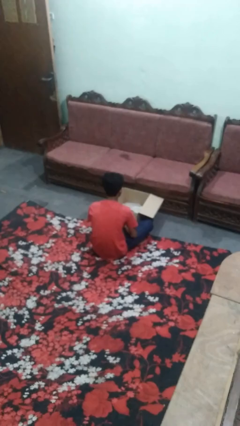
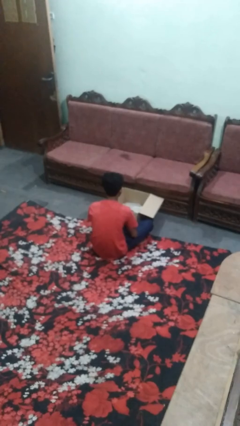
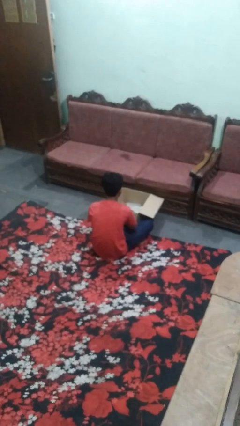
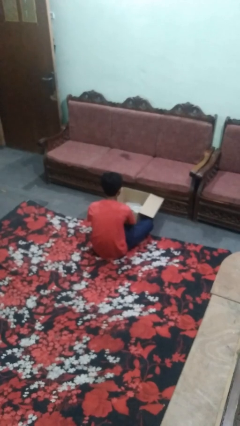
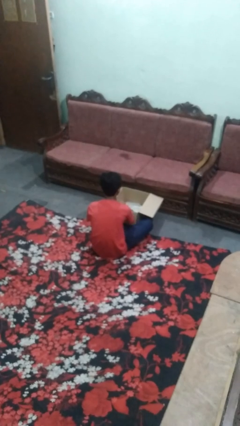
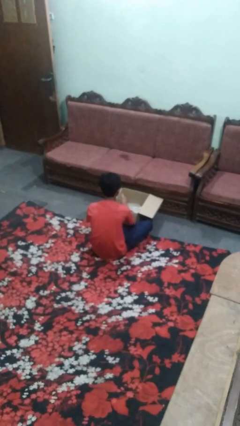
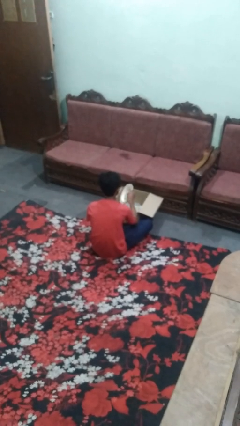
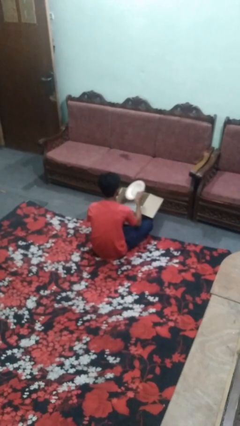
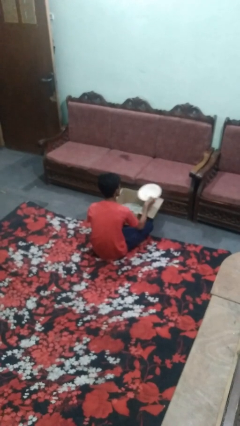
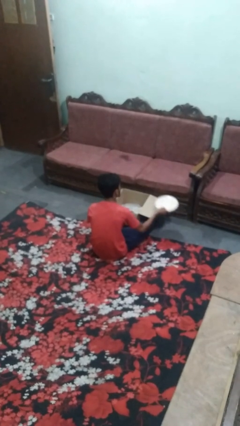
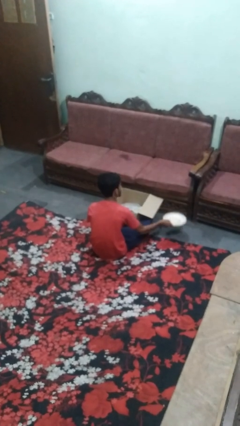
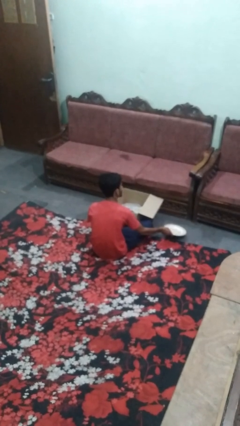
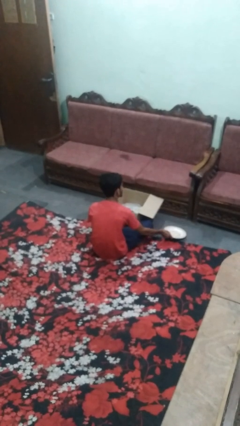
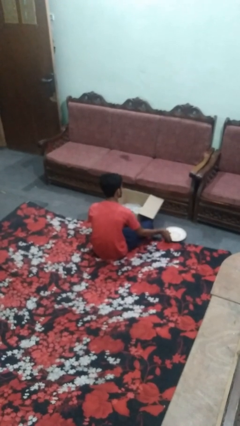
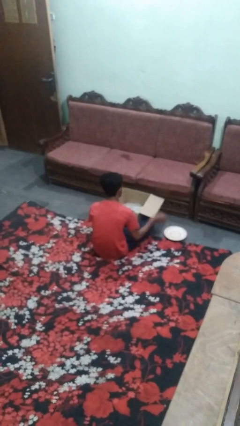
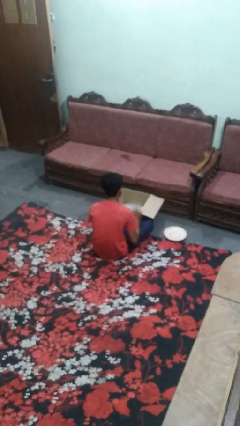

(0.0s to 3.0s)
person takes object from box

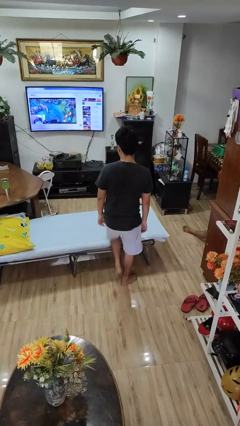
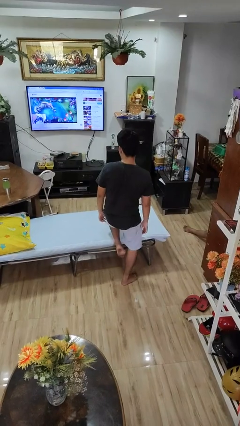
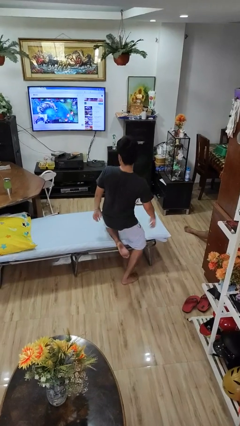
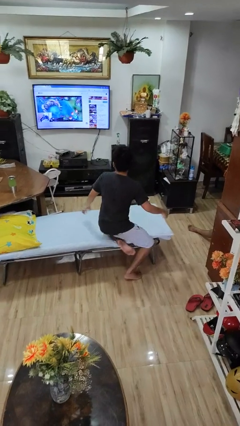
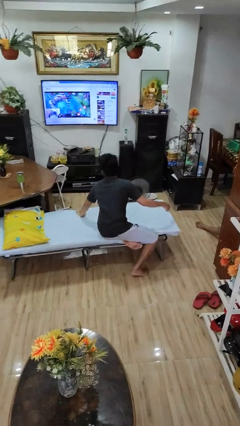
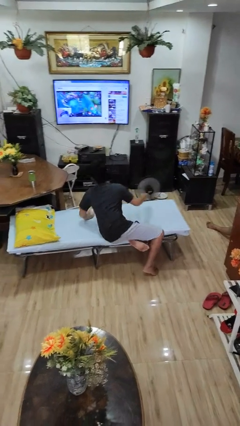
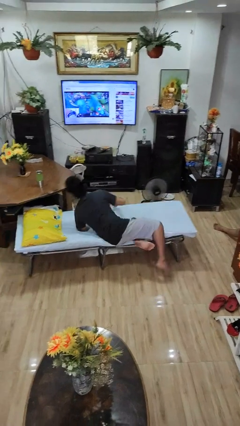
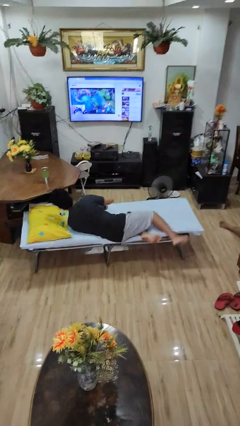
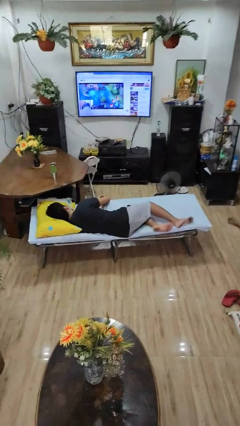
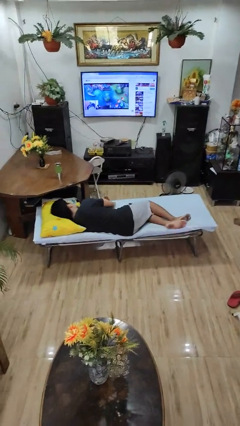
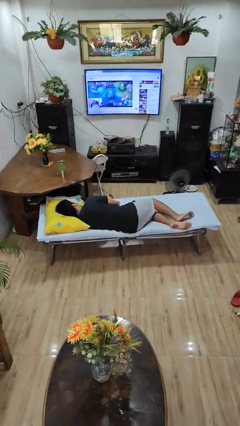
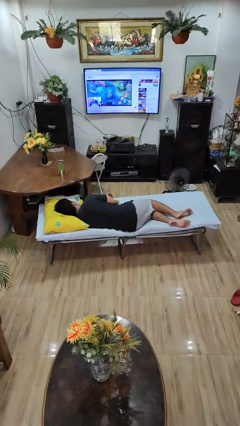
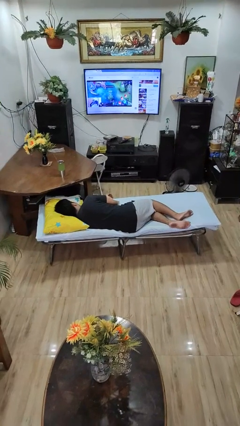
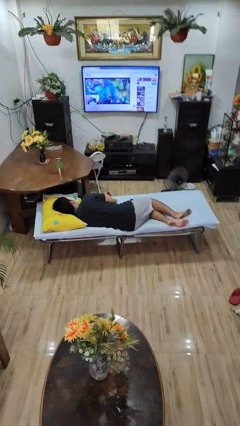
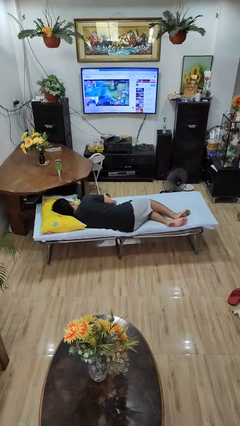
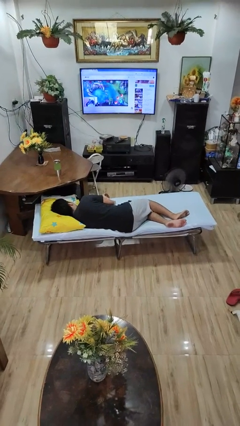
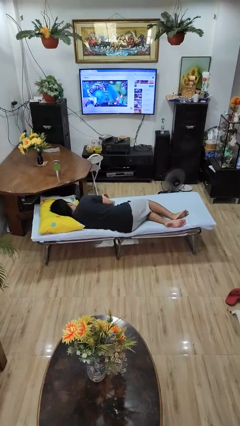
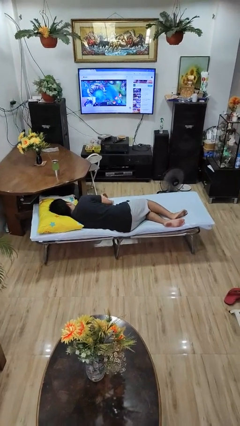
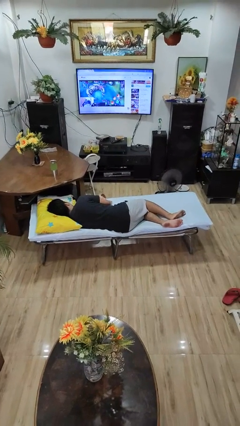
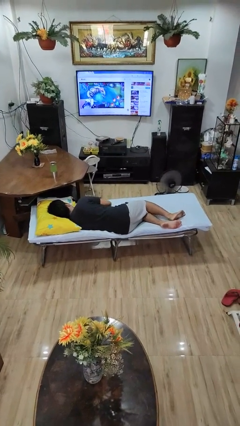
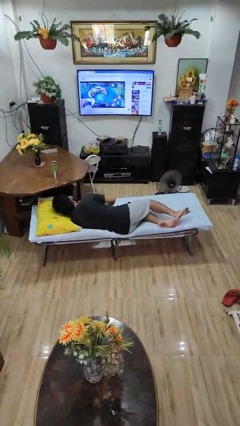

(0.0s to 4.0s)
person lies down on bed

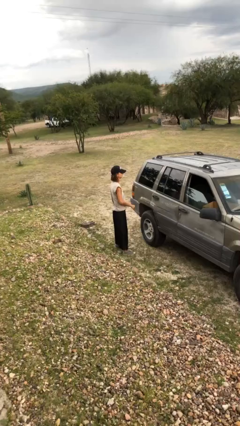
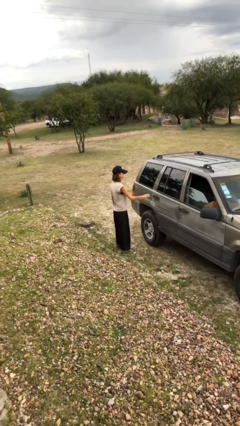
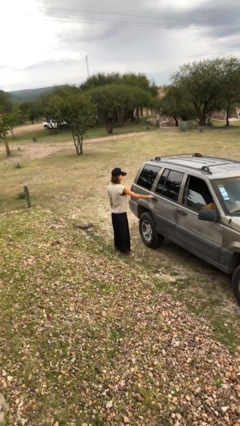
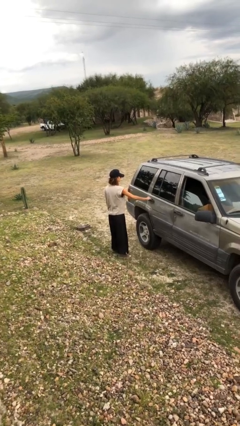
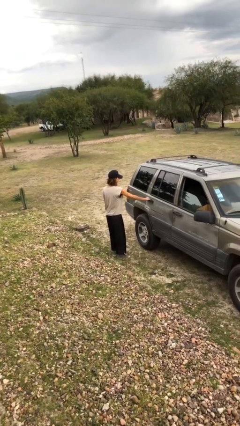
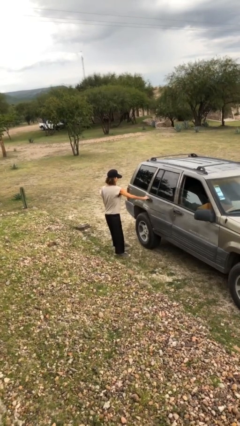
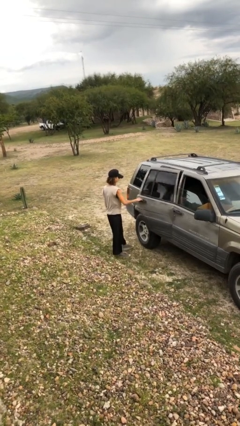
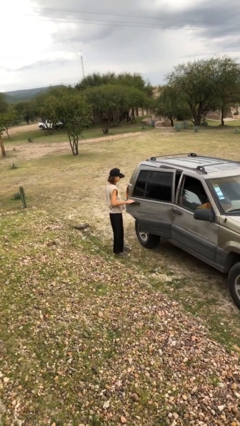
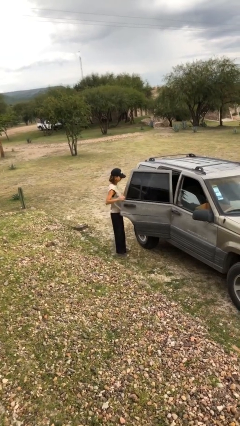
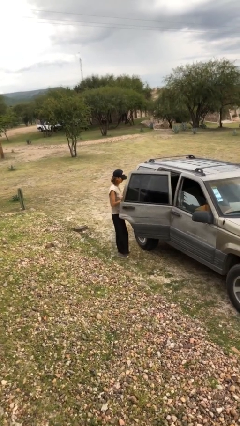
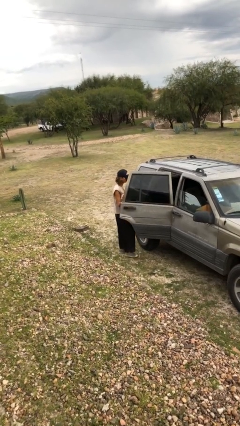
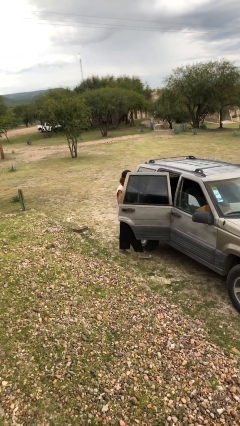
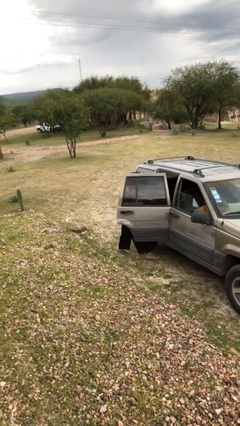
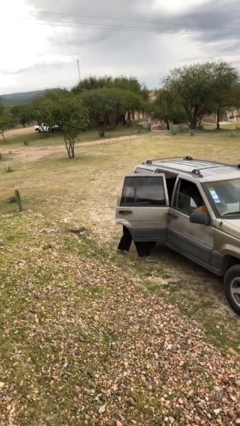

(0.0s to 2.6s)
person opens car door

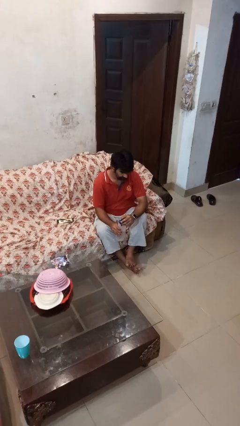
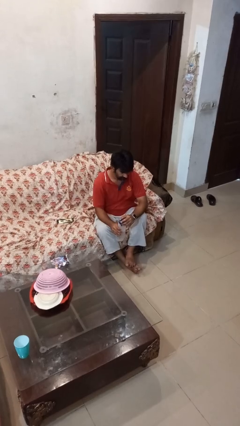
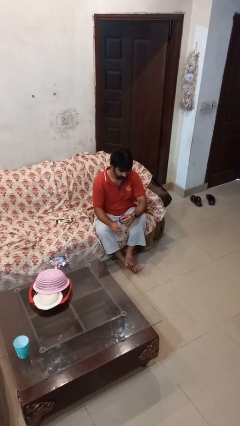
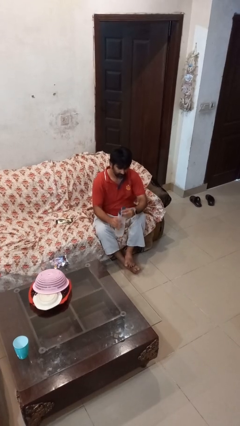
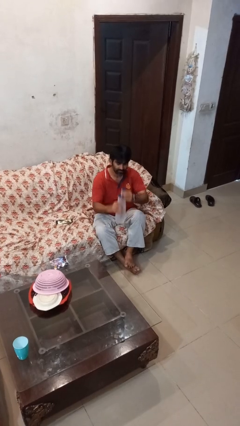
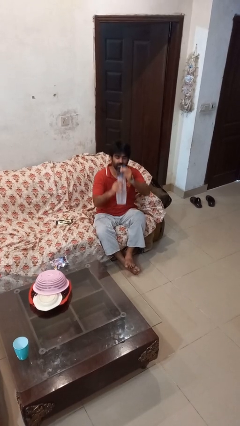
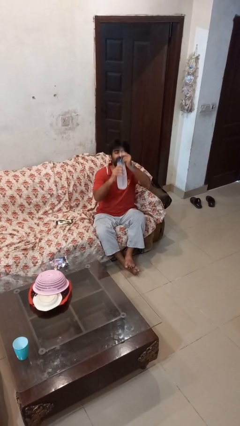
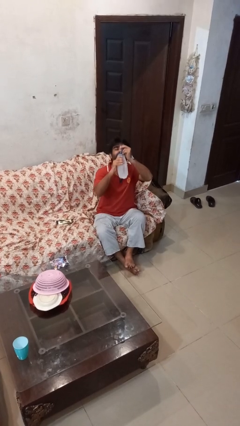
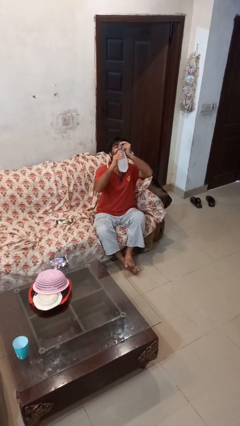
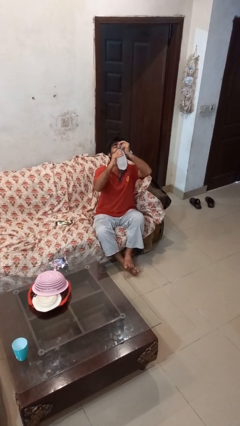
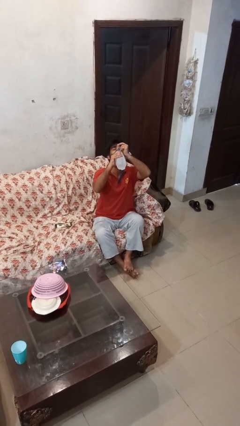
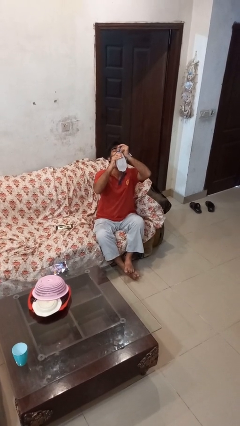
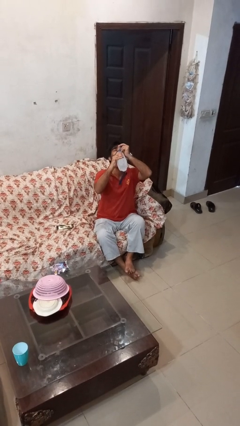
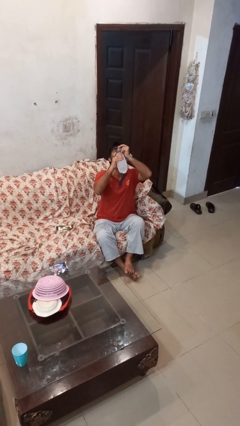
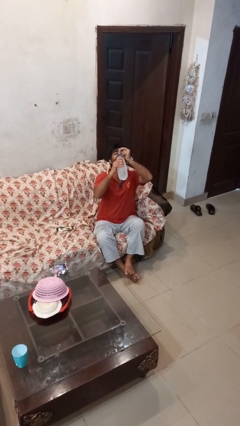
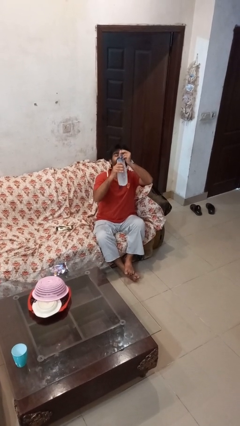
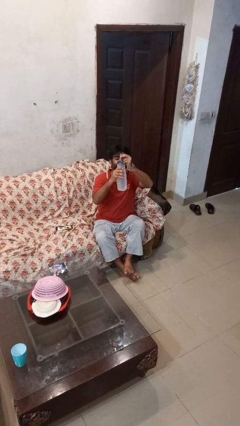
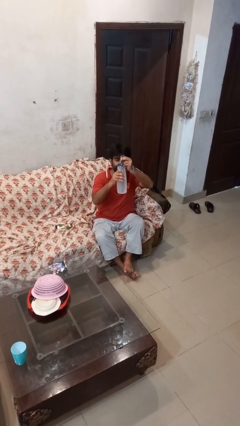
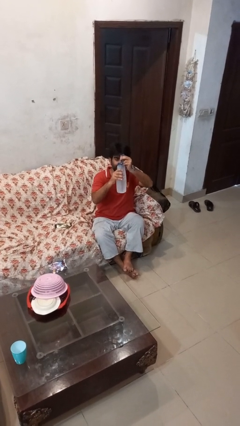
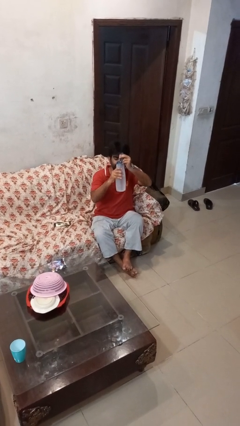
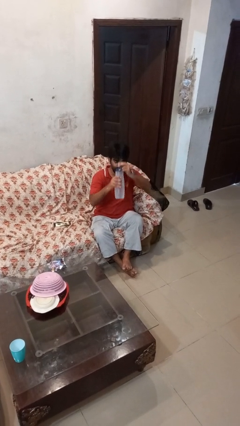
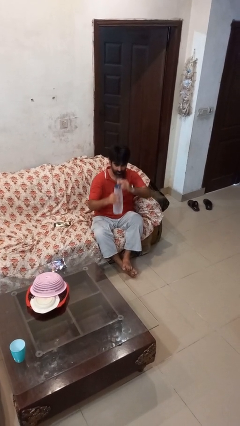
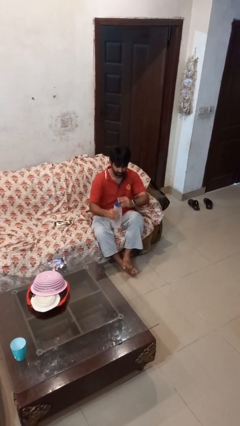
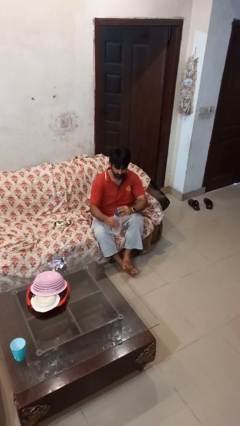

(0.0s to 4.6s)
person drinks from bottle

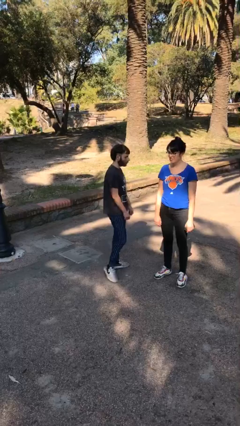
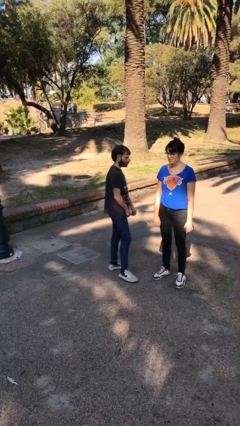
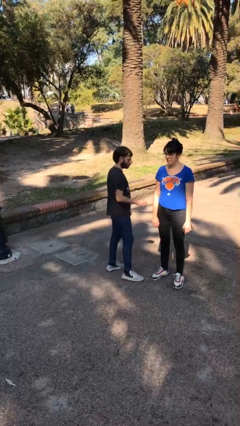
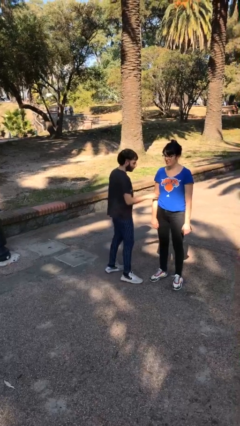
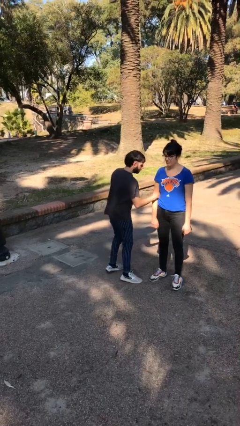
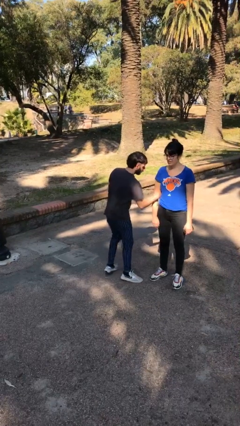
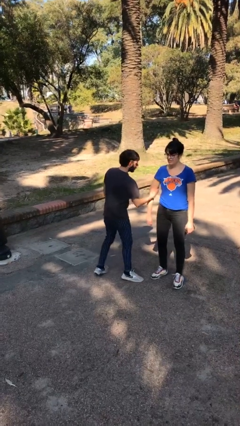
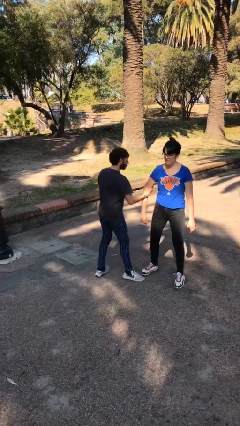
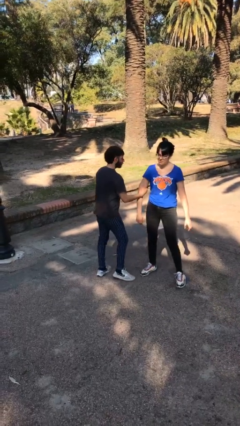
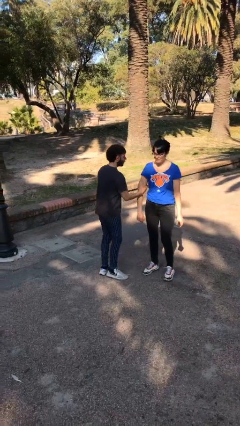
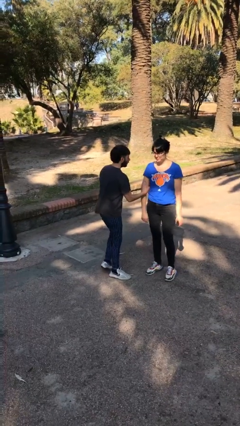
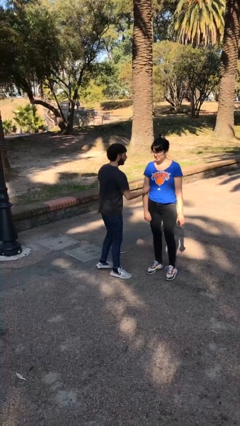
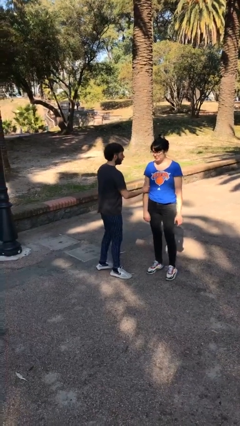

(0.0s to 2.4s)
person grabs person by bicep

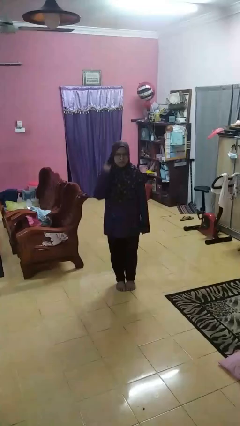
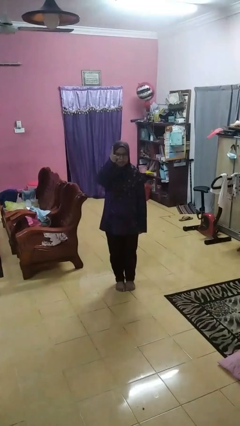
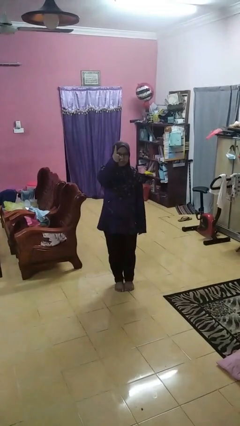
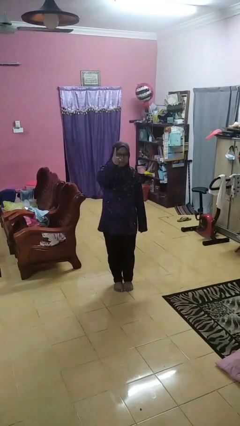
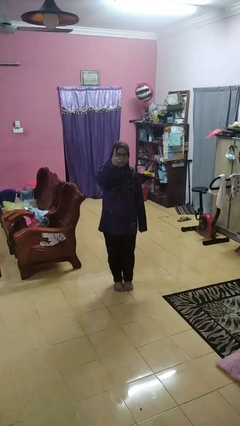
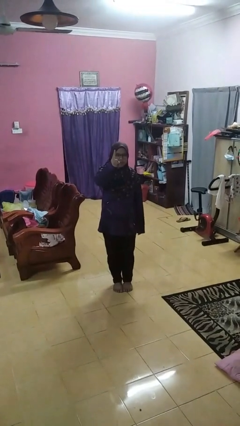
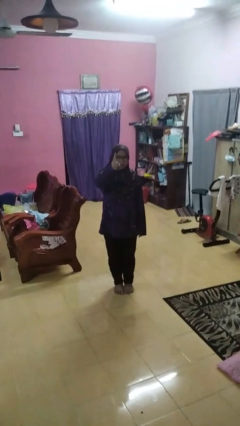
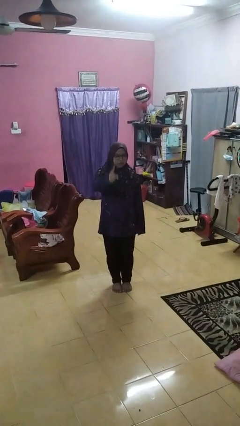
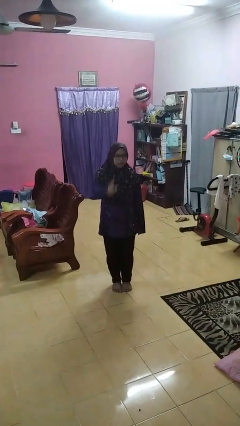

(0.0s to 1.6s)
person gestures number one
